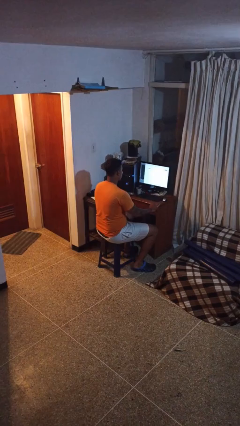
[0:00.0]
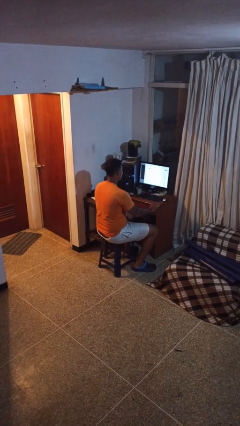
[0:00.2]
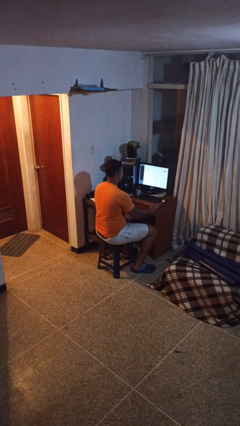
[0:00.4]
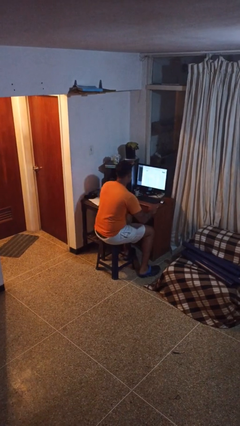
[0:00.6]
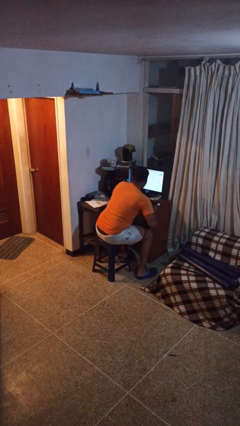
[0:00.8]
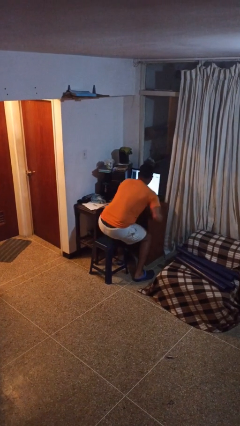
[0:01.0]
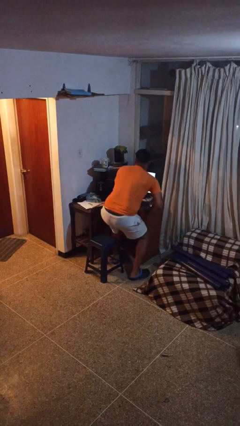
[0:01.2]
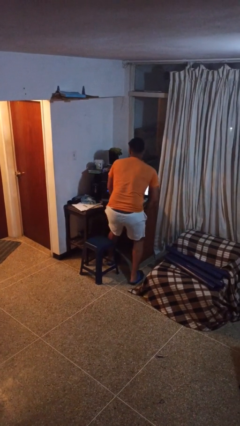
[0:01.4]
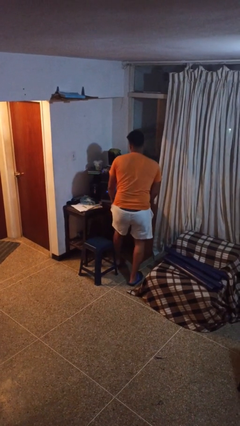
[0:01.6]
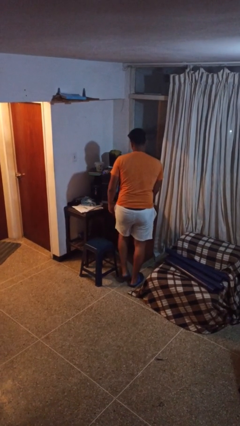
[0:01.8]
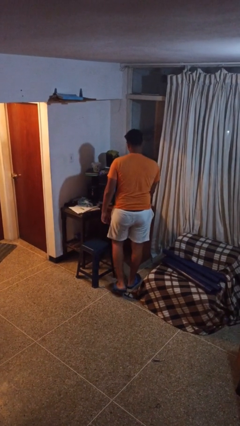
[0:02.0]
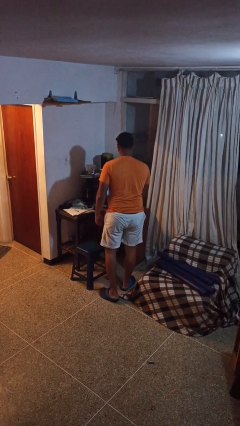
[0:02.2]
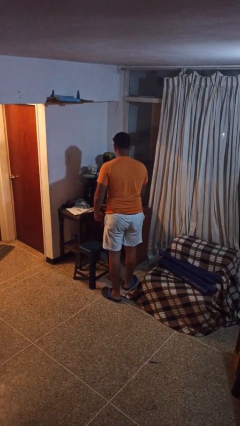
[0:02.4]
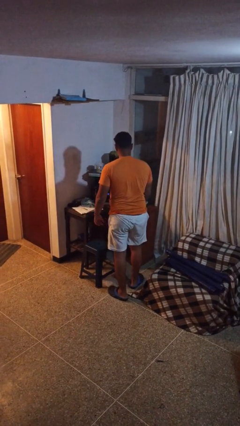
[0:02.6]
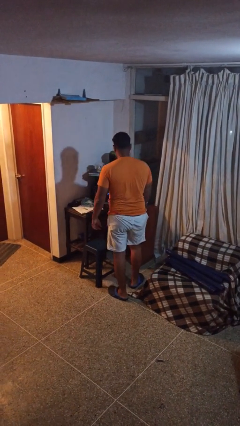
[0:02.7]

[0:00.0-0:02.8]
person stands up

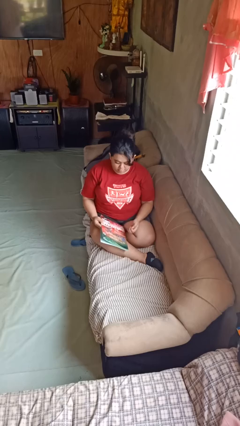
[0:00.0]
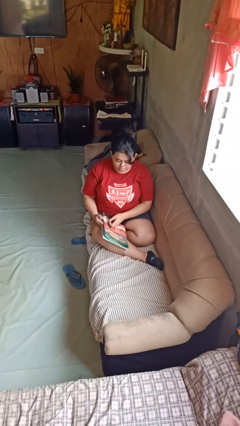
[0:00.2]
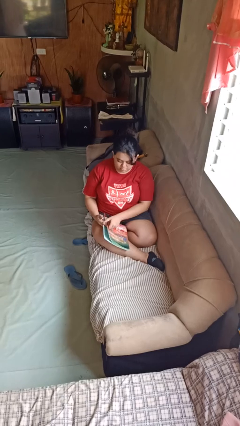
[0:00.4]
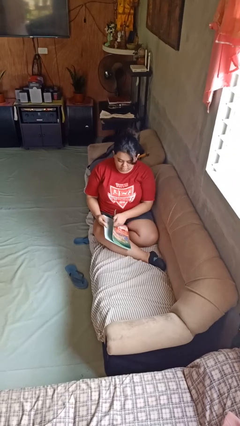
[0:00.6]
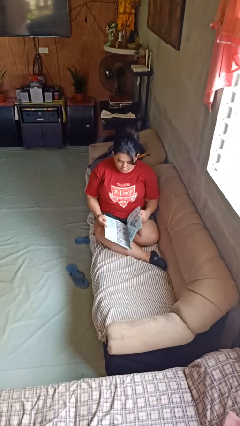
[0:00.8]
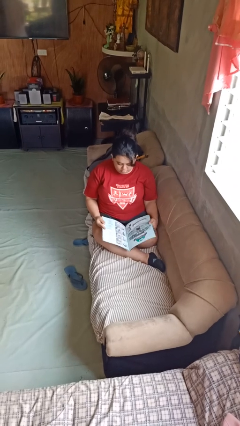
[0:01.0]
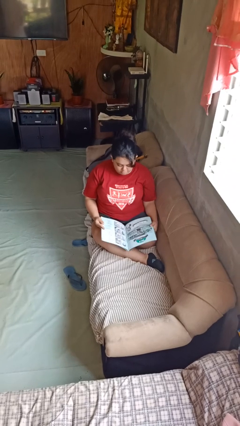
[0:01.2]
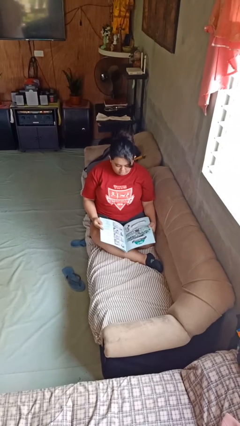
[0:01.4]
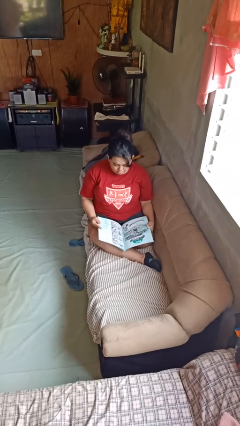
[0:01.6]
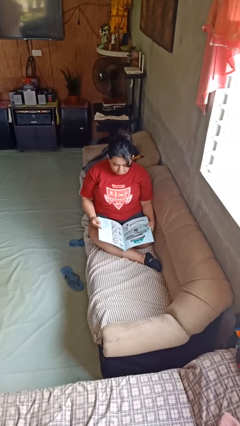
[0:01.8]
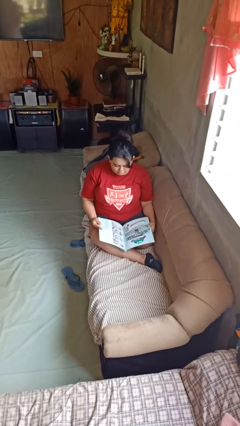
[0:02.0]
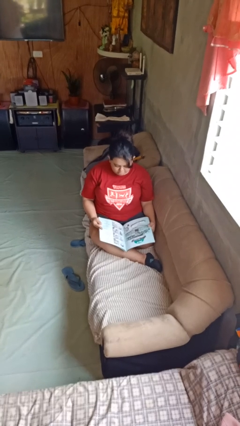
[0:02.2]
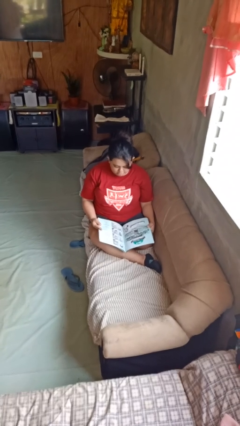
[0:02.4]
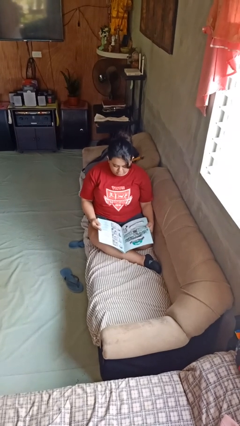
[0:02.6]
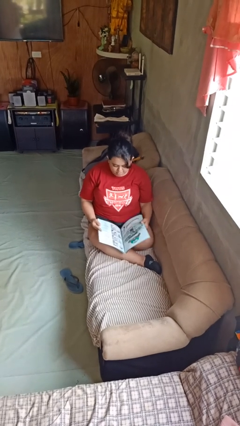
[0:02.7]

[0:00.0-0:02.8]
person reads magazine

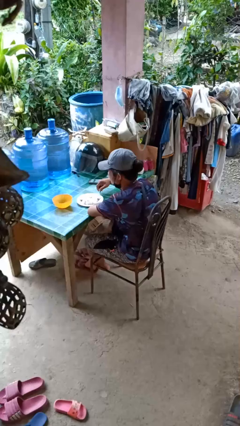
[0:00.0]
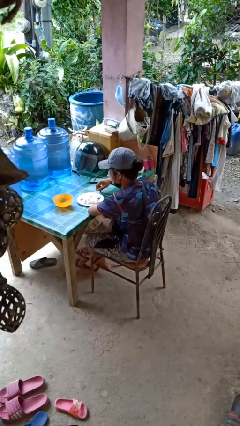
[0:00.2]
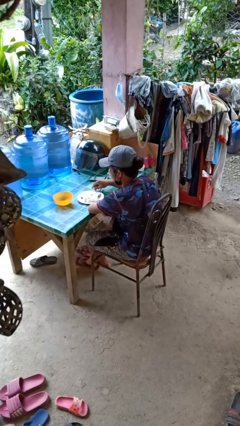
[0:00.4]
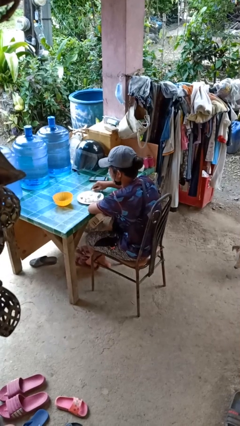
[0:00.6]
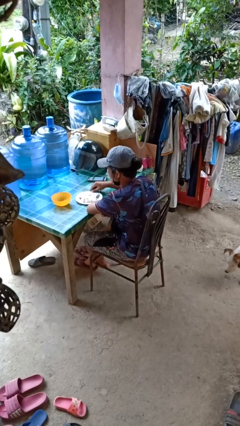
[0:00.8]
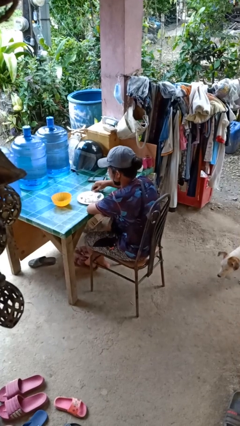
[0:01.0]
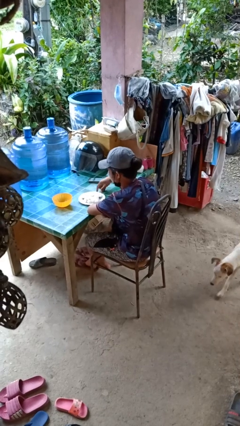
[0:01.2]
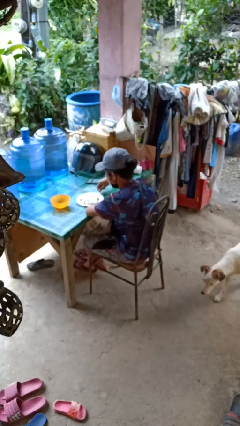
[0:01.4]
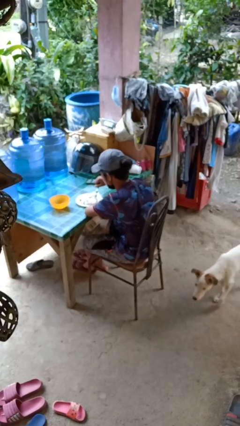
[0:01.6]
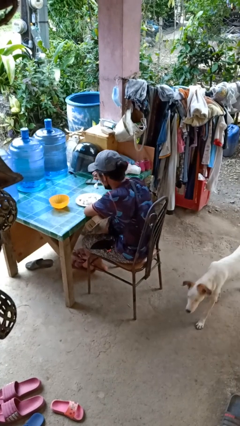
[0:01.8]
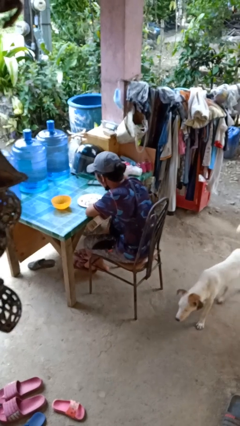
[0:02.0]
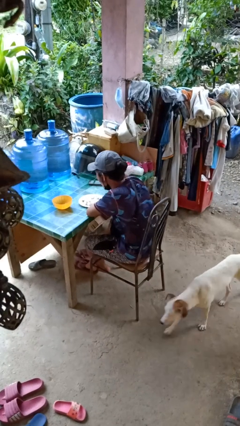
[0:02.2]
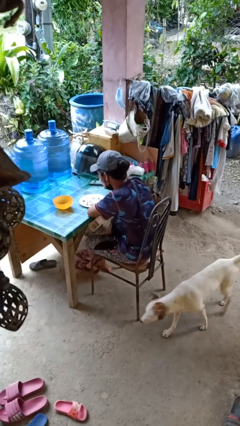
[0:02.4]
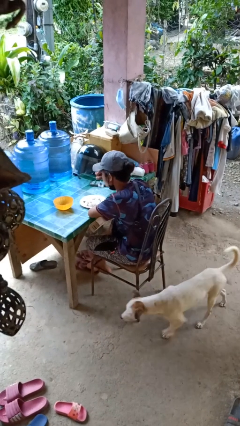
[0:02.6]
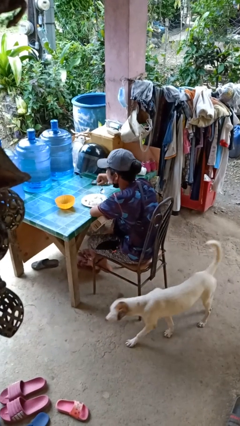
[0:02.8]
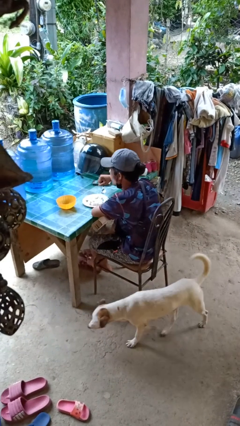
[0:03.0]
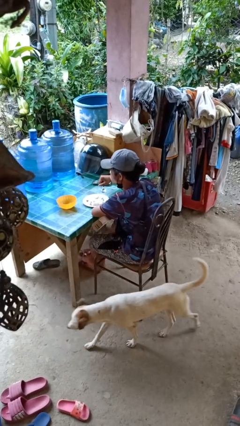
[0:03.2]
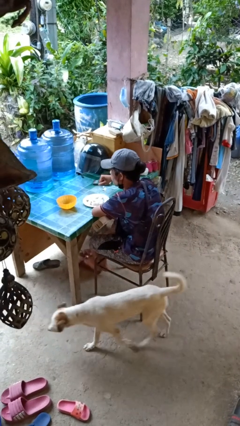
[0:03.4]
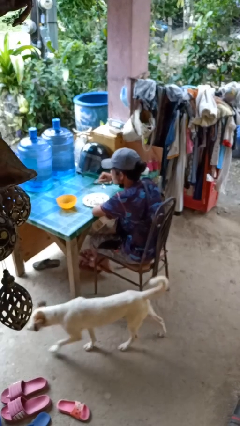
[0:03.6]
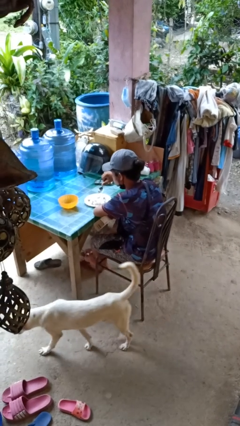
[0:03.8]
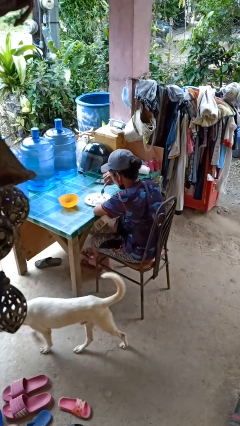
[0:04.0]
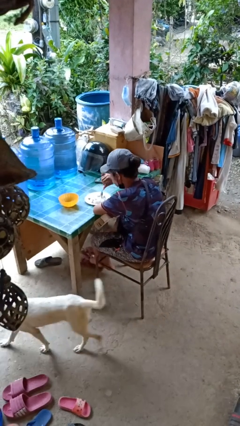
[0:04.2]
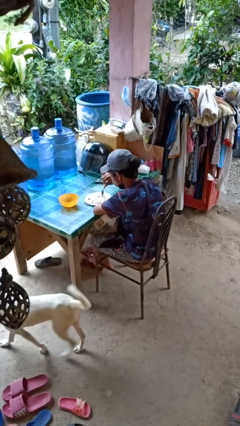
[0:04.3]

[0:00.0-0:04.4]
person eats with utensil

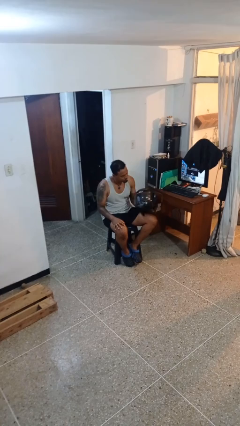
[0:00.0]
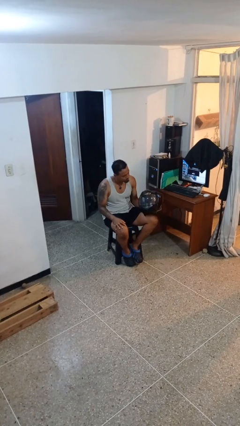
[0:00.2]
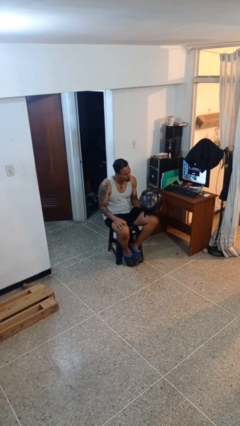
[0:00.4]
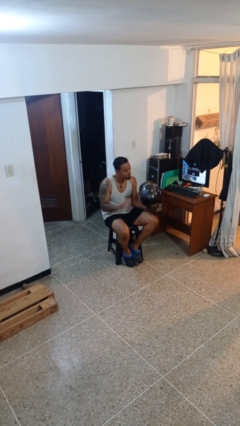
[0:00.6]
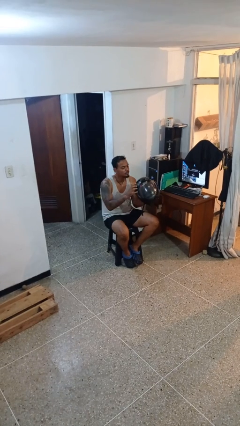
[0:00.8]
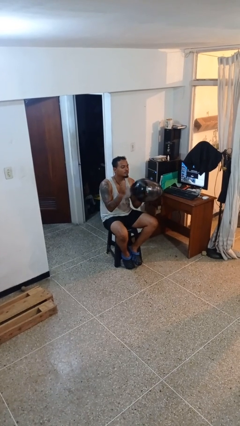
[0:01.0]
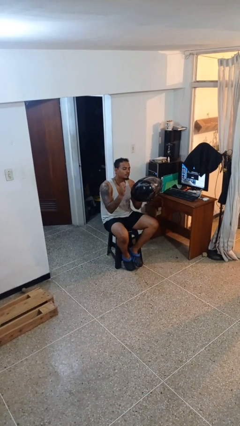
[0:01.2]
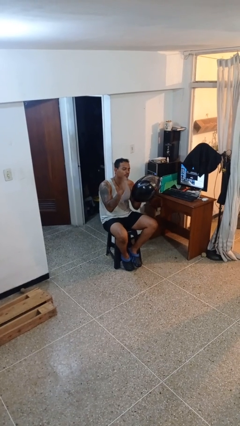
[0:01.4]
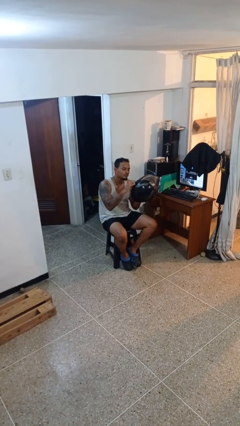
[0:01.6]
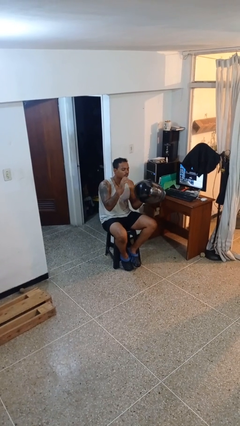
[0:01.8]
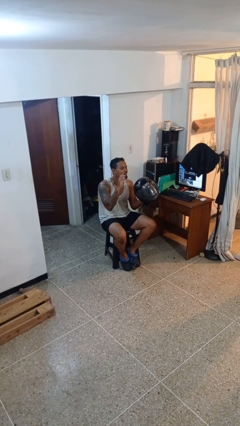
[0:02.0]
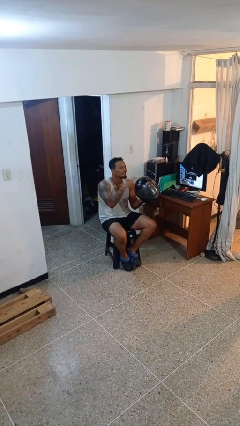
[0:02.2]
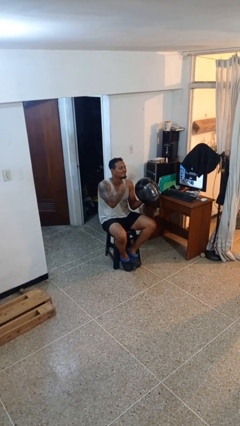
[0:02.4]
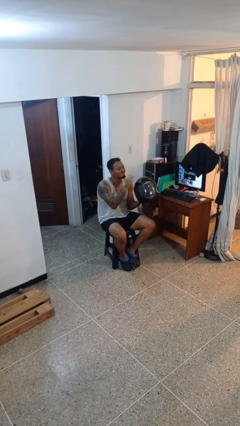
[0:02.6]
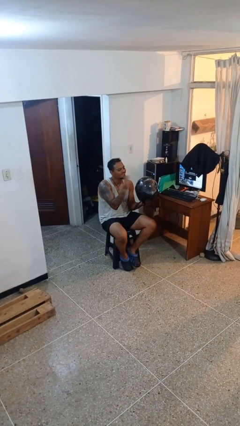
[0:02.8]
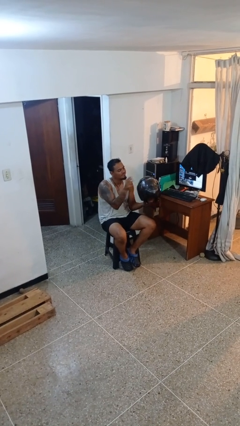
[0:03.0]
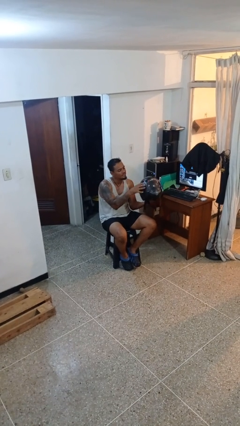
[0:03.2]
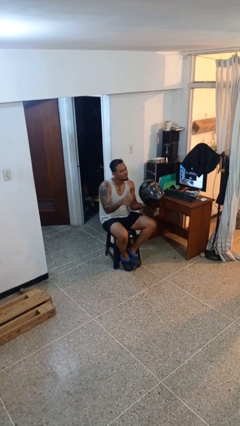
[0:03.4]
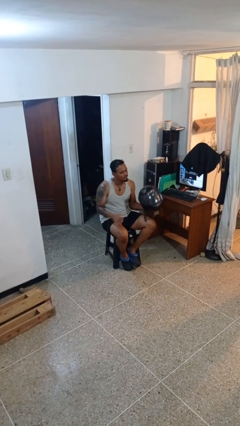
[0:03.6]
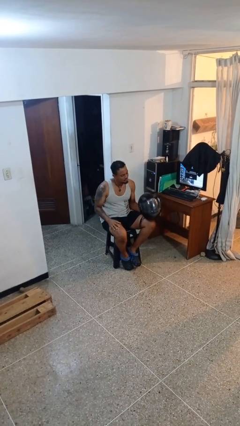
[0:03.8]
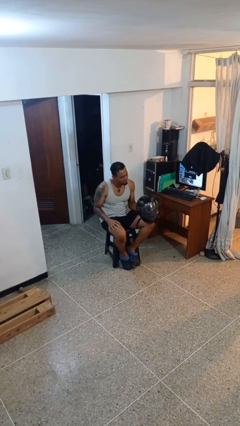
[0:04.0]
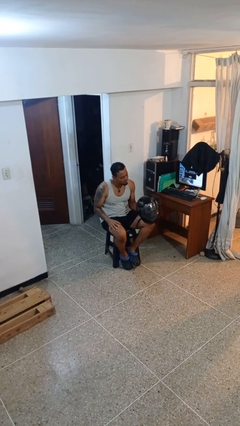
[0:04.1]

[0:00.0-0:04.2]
person taps object with finger

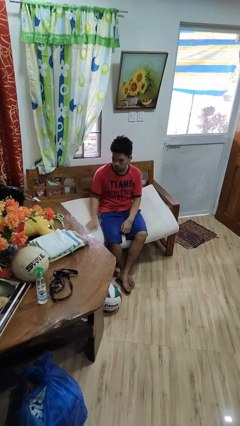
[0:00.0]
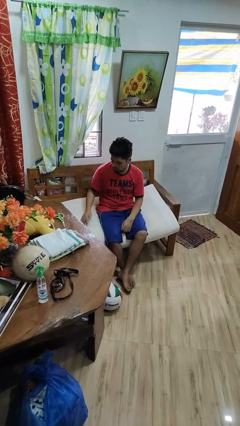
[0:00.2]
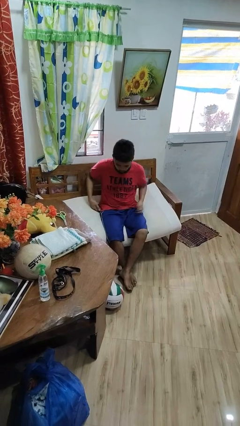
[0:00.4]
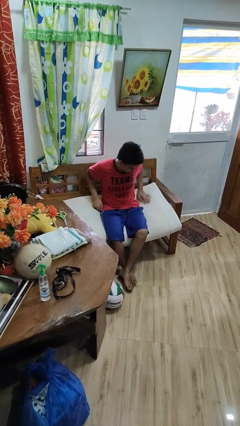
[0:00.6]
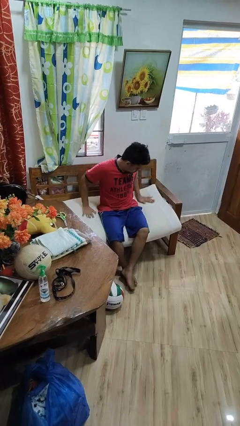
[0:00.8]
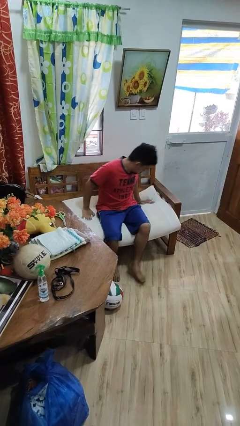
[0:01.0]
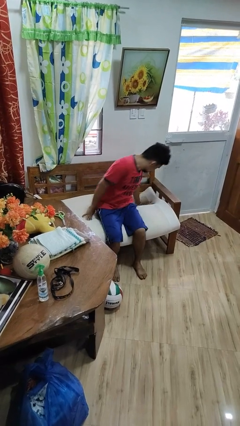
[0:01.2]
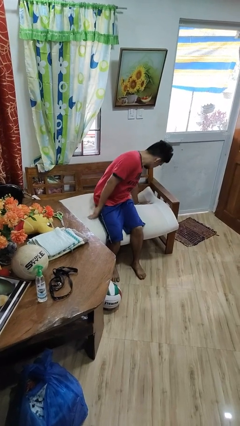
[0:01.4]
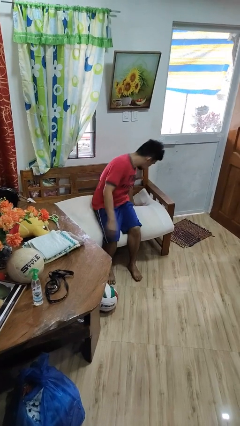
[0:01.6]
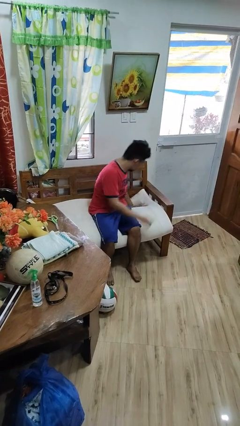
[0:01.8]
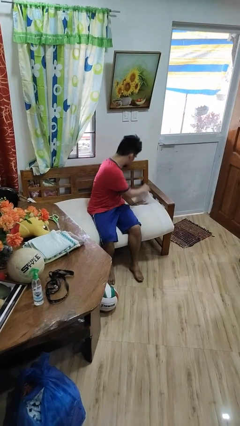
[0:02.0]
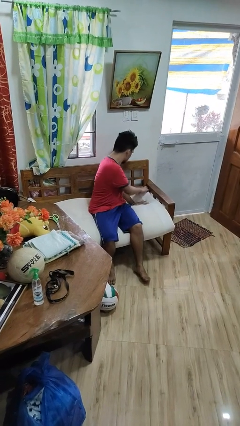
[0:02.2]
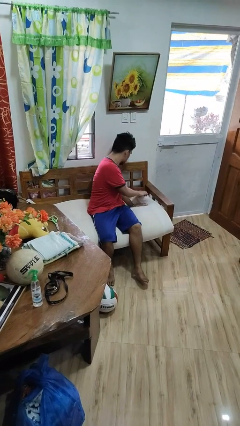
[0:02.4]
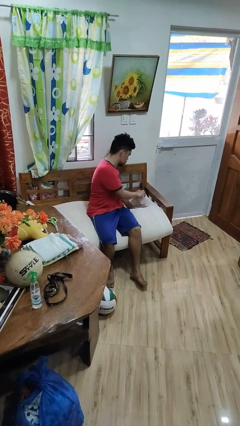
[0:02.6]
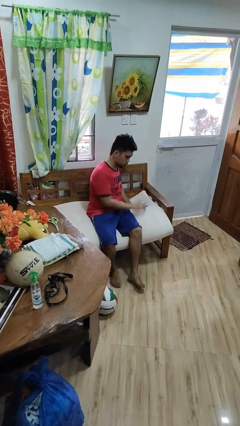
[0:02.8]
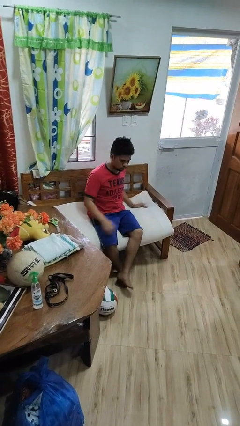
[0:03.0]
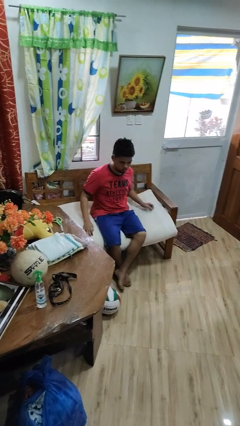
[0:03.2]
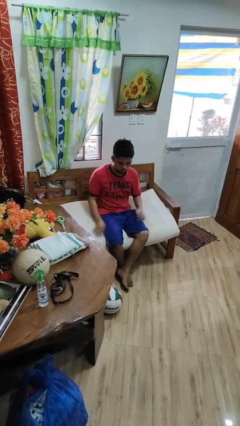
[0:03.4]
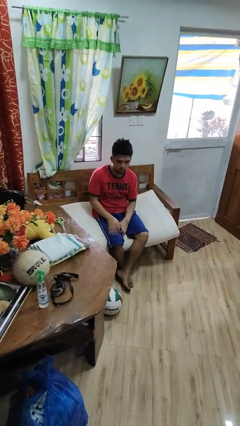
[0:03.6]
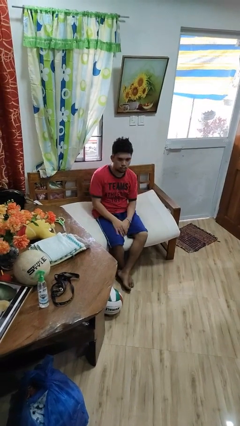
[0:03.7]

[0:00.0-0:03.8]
person searches in couch
